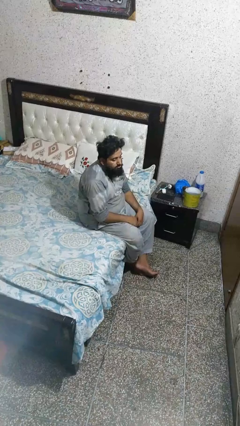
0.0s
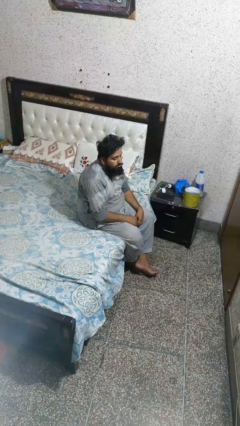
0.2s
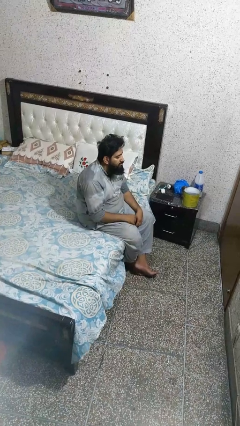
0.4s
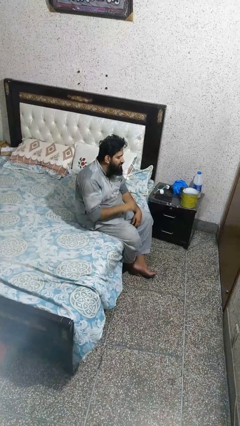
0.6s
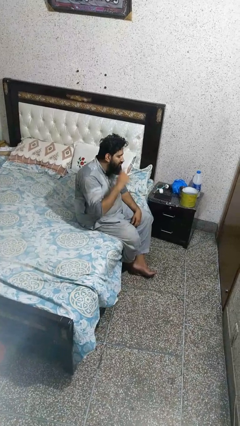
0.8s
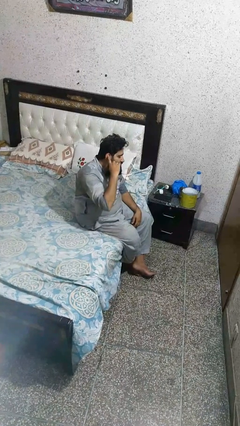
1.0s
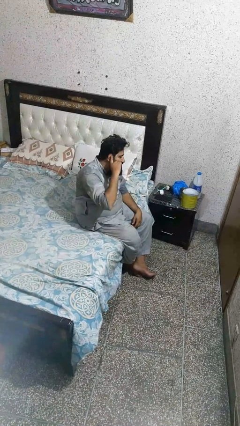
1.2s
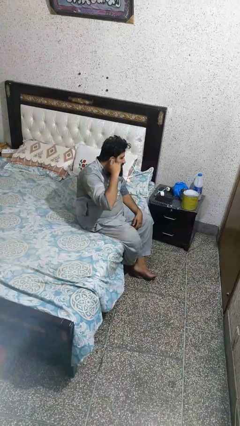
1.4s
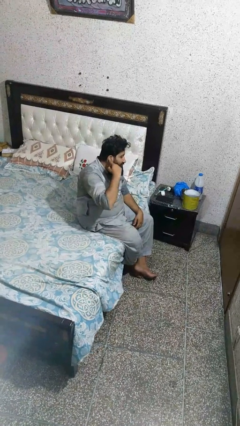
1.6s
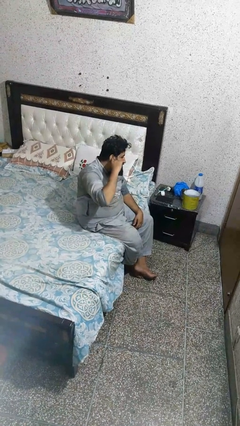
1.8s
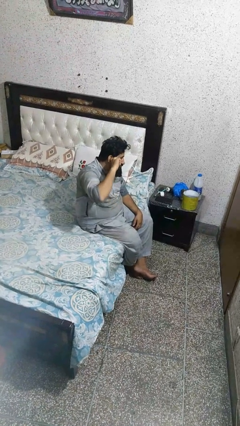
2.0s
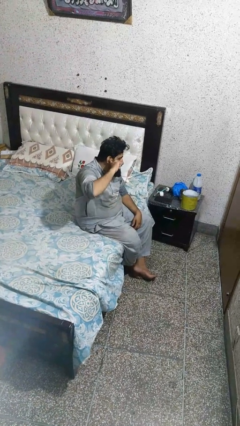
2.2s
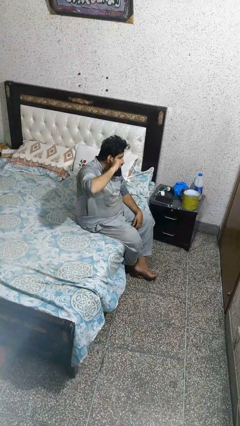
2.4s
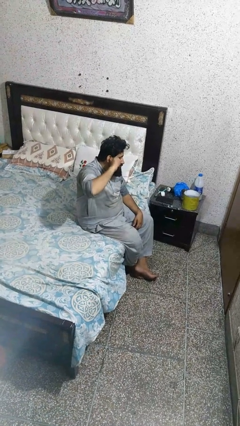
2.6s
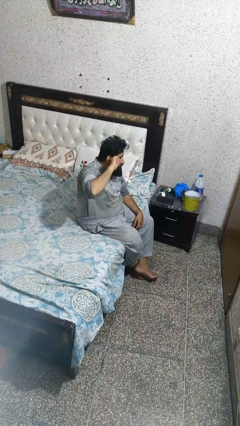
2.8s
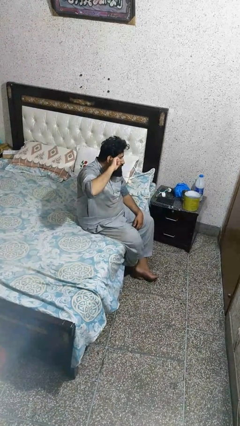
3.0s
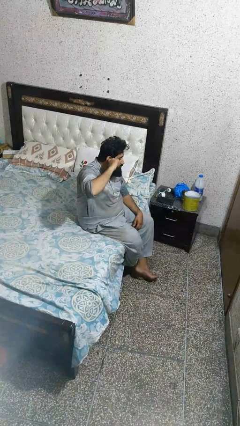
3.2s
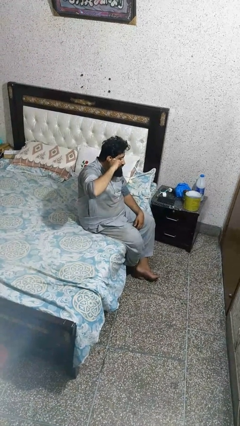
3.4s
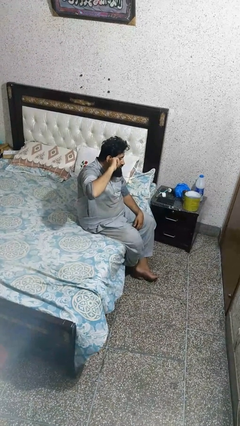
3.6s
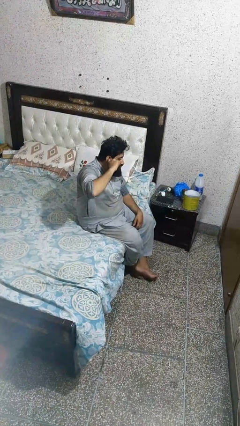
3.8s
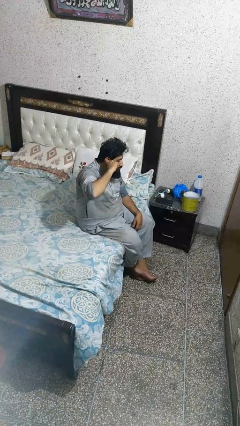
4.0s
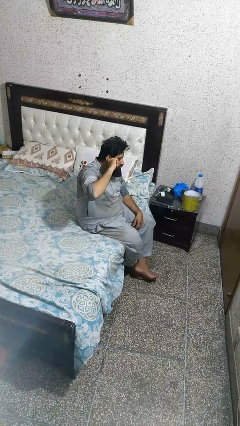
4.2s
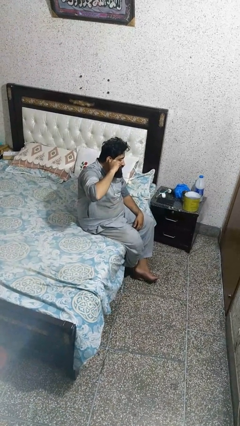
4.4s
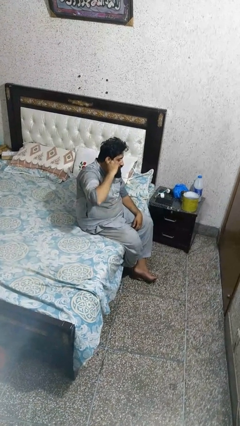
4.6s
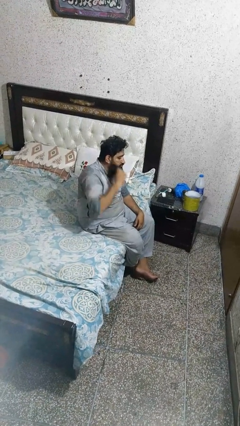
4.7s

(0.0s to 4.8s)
person puts fingers in ear

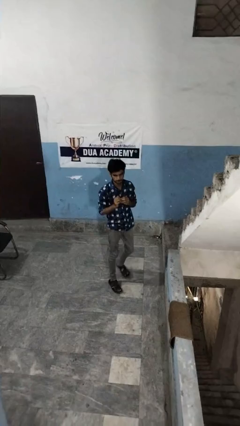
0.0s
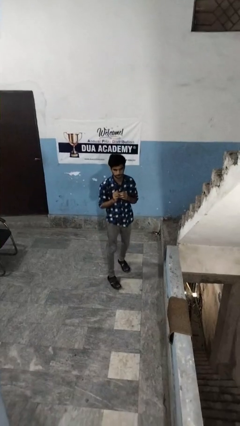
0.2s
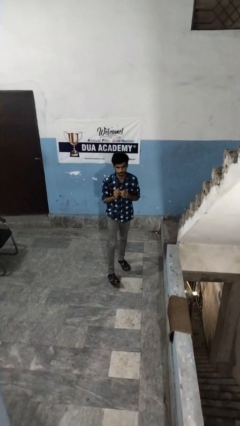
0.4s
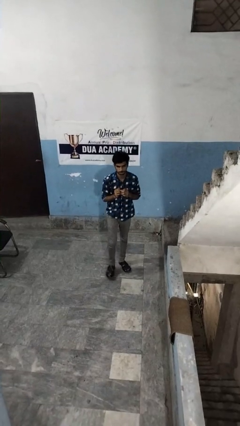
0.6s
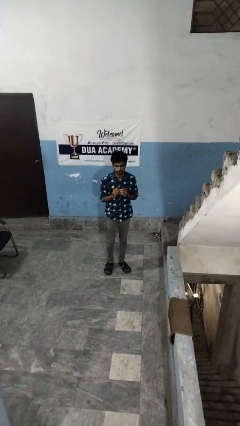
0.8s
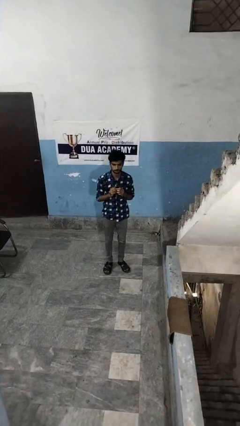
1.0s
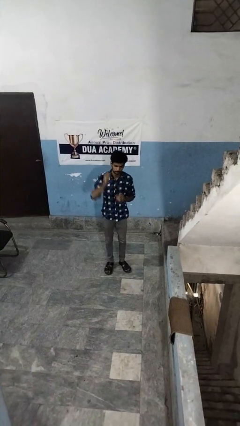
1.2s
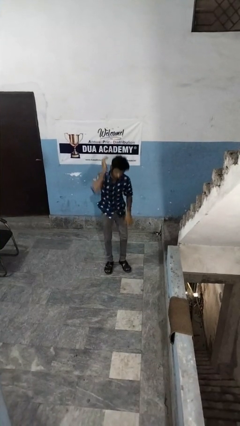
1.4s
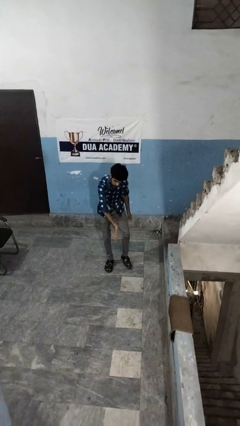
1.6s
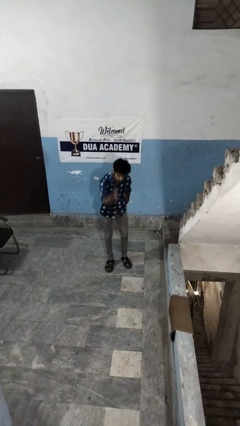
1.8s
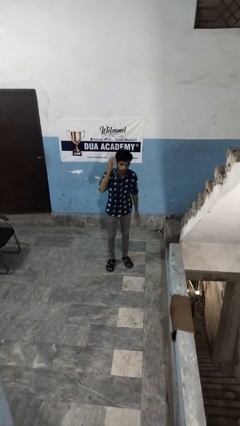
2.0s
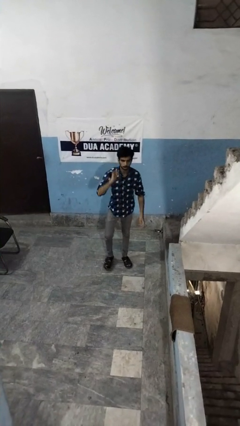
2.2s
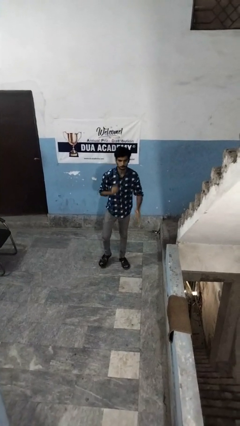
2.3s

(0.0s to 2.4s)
person karate chop

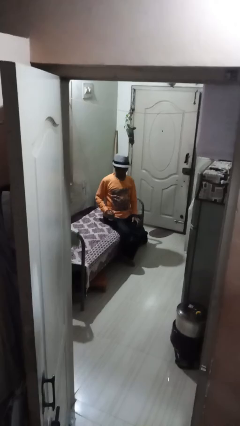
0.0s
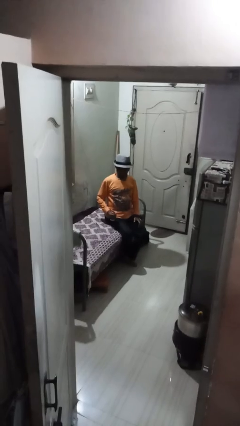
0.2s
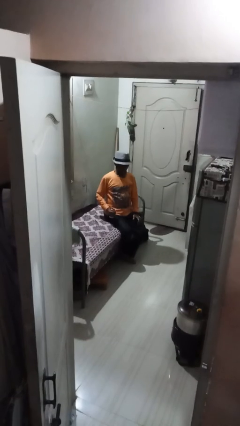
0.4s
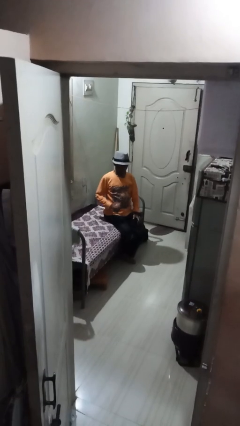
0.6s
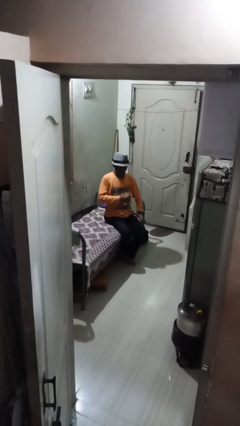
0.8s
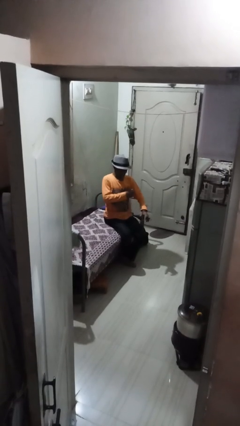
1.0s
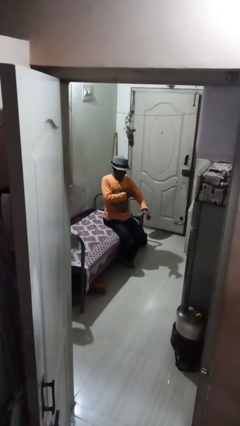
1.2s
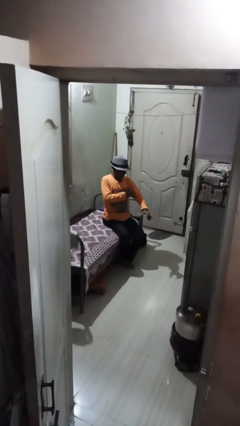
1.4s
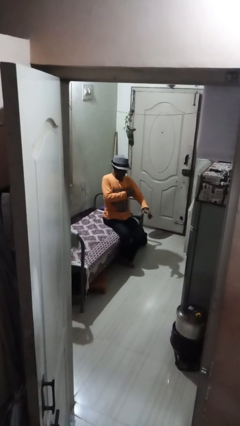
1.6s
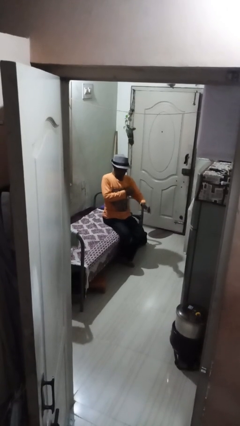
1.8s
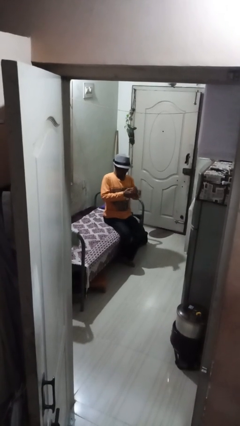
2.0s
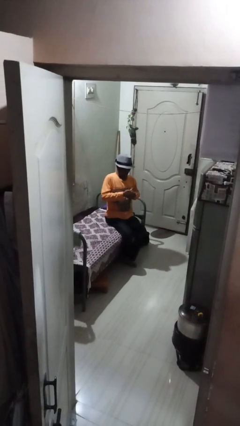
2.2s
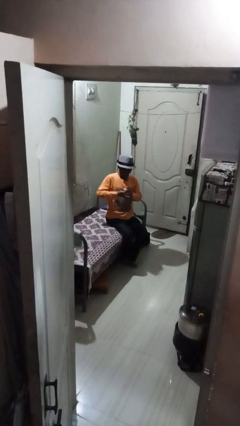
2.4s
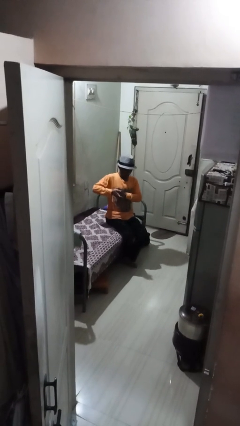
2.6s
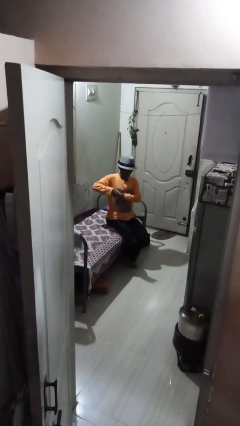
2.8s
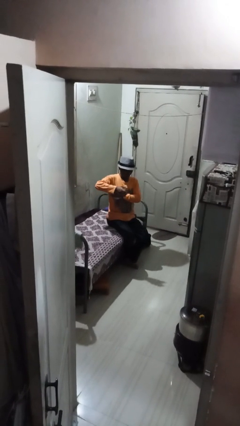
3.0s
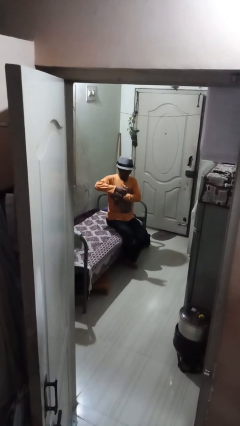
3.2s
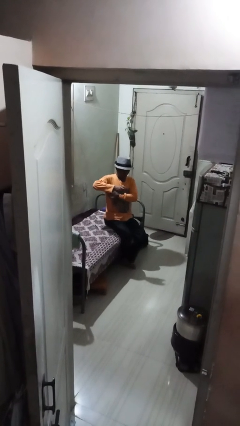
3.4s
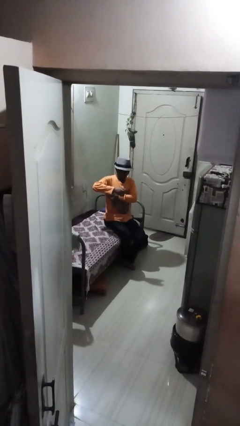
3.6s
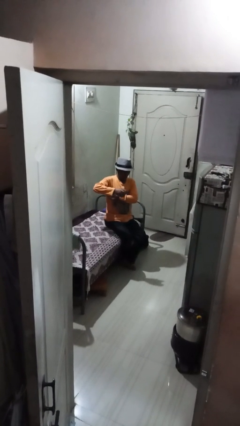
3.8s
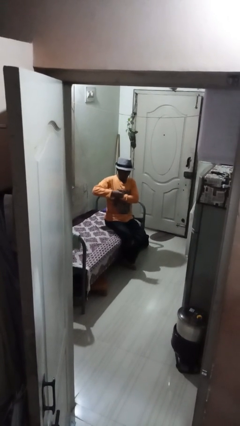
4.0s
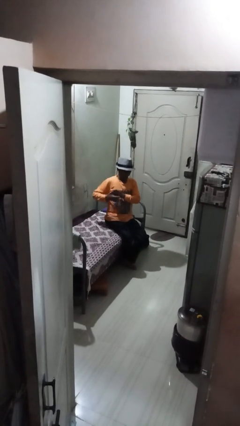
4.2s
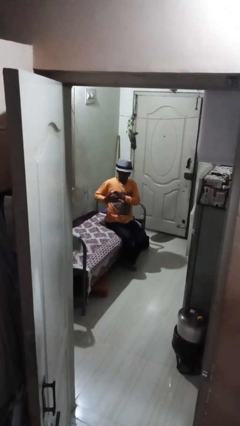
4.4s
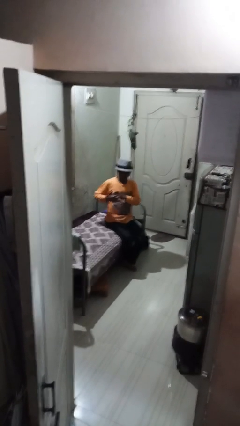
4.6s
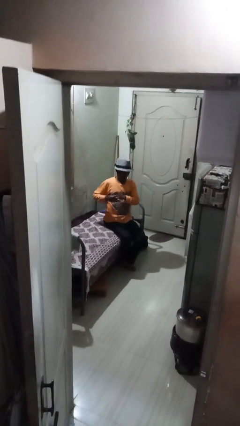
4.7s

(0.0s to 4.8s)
person applies deodorant

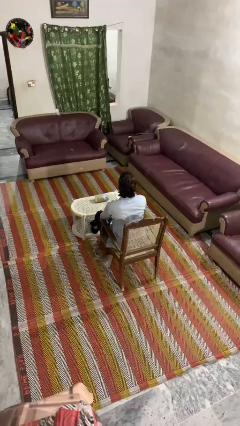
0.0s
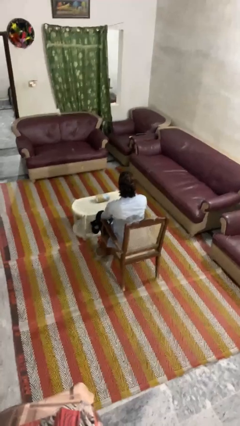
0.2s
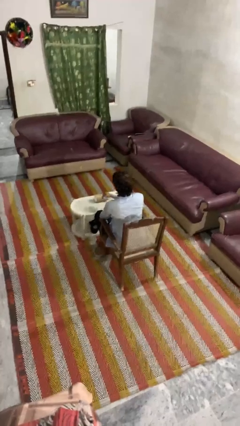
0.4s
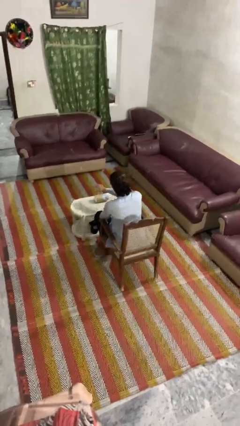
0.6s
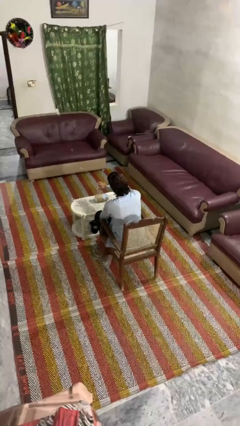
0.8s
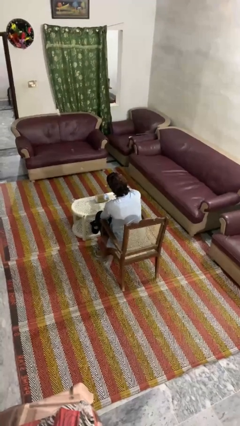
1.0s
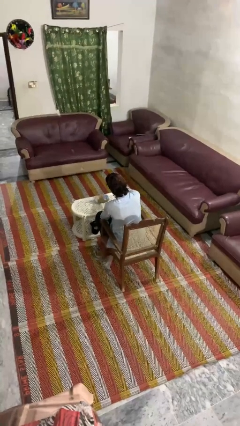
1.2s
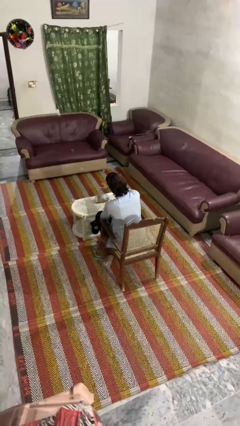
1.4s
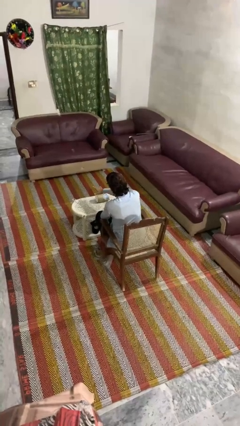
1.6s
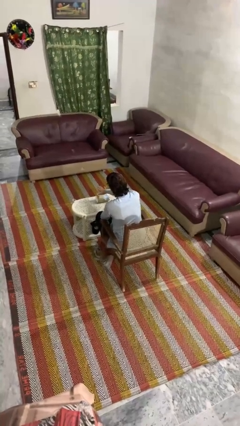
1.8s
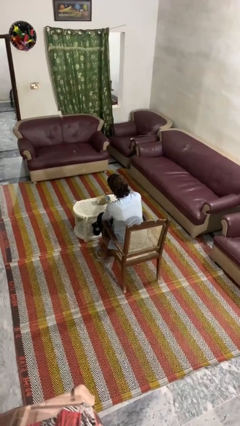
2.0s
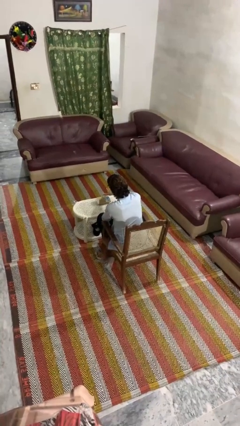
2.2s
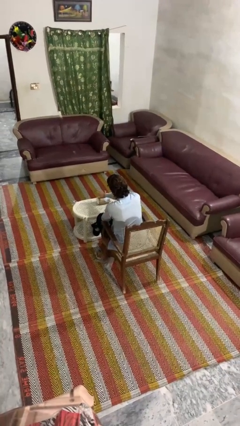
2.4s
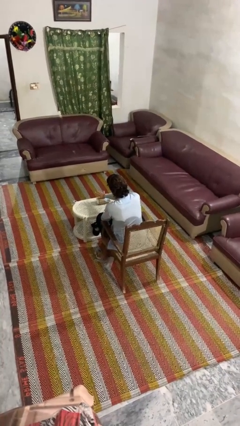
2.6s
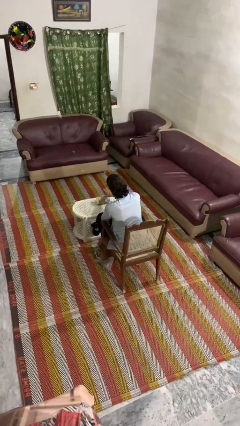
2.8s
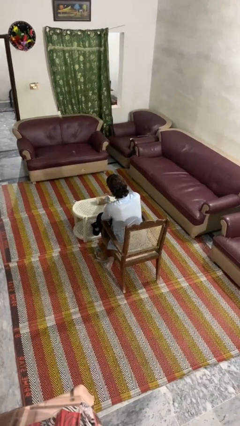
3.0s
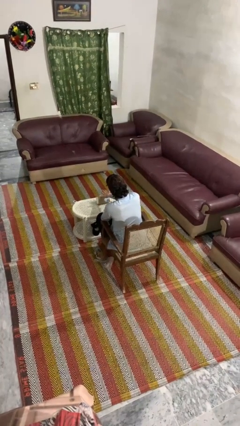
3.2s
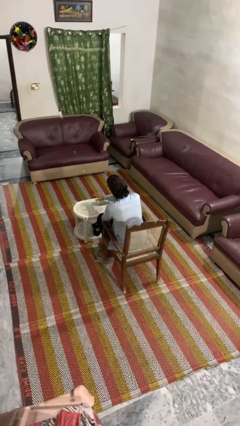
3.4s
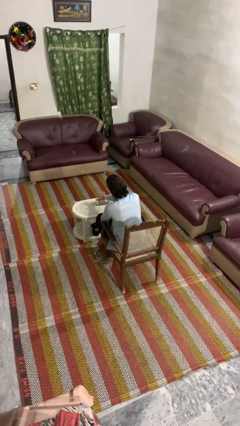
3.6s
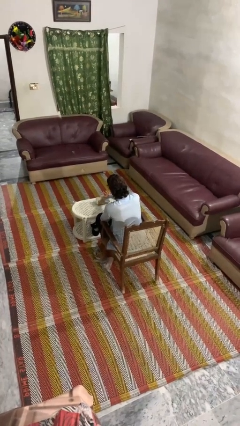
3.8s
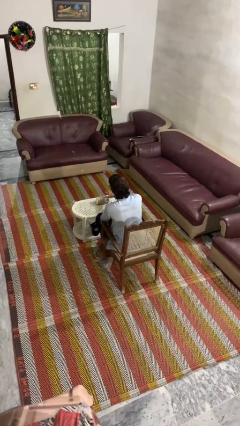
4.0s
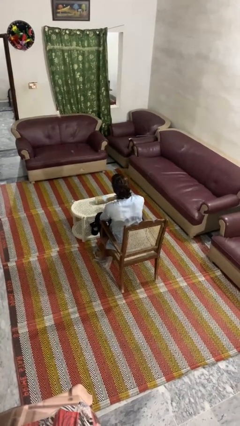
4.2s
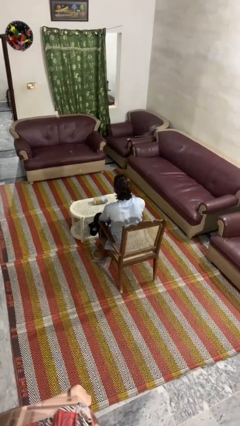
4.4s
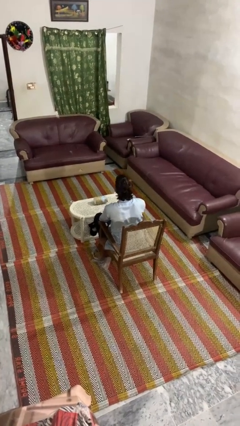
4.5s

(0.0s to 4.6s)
person waves hand over object

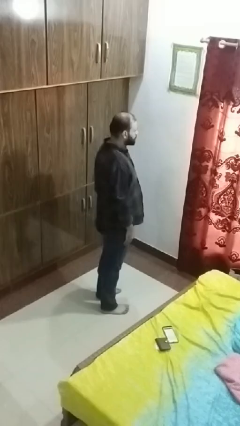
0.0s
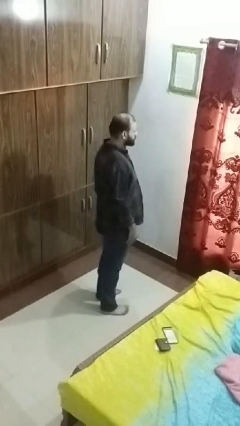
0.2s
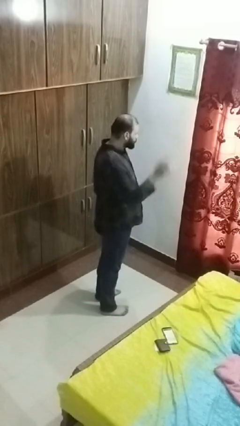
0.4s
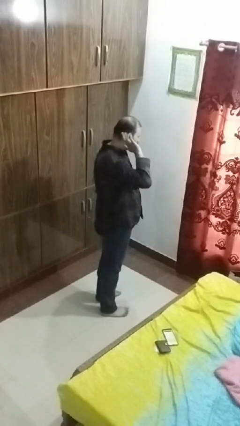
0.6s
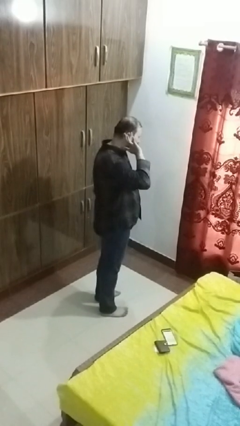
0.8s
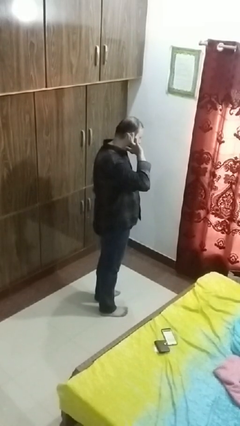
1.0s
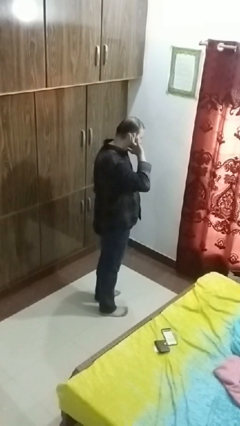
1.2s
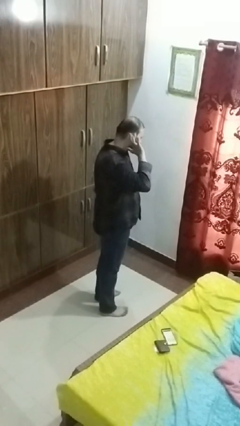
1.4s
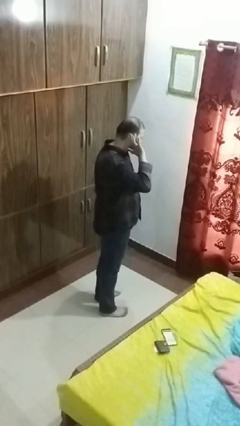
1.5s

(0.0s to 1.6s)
person gestures listen closely
